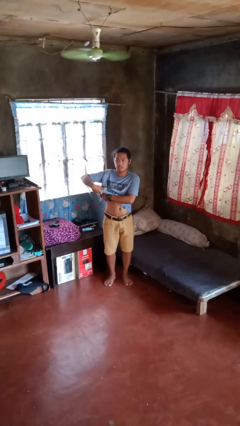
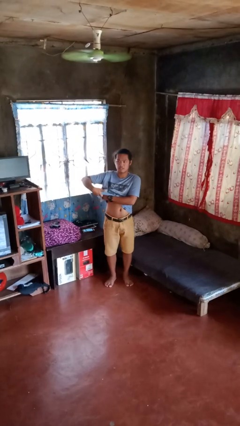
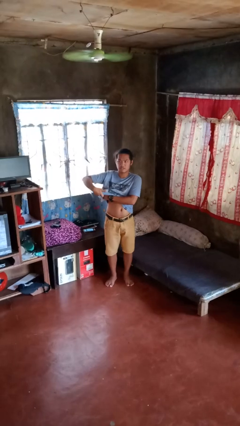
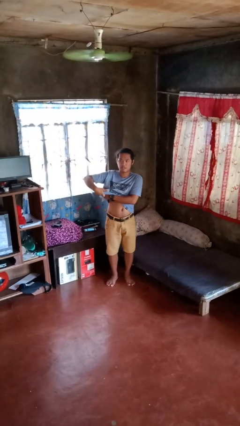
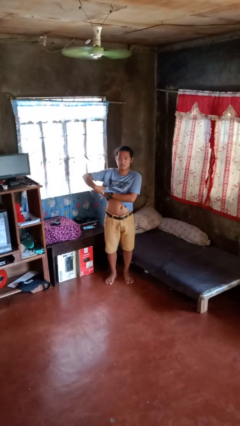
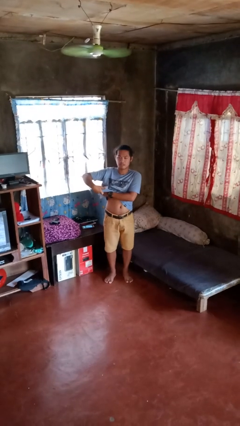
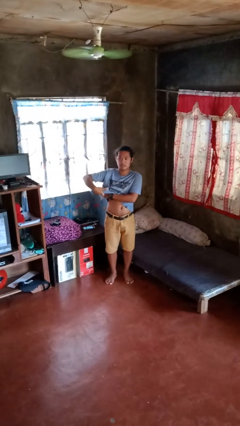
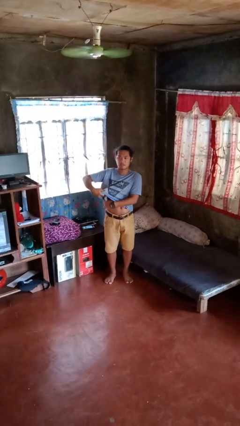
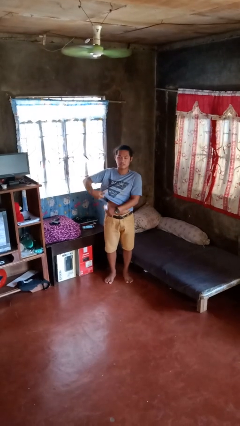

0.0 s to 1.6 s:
person applies deodorant

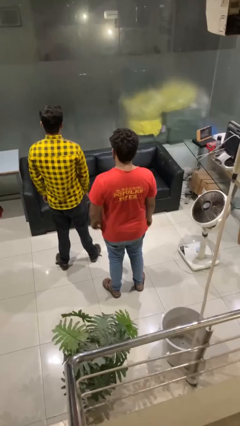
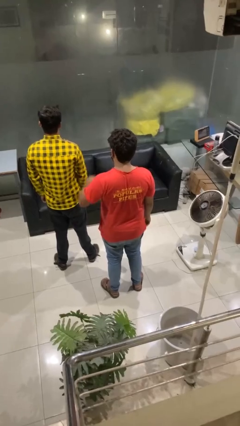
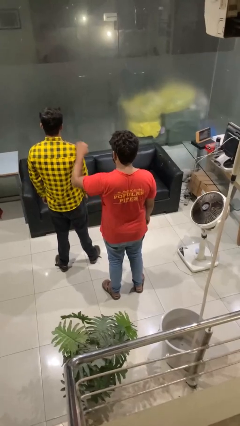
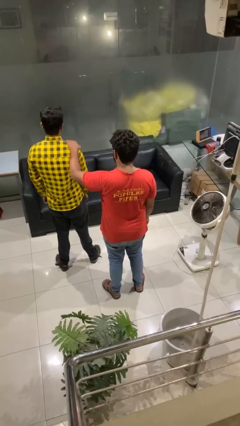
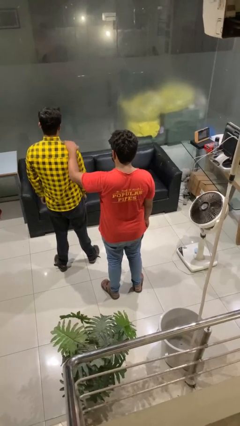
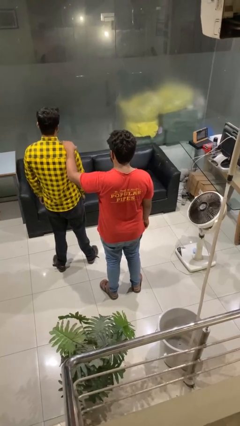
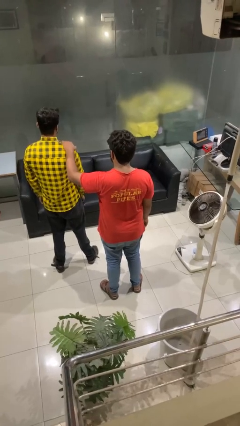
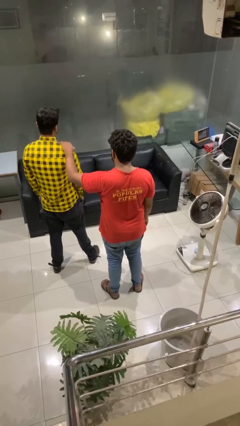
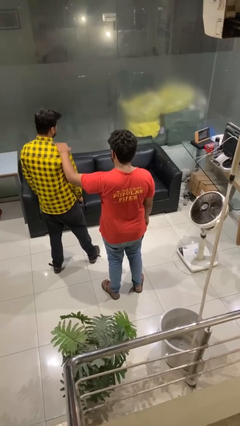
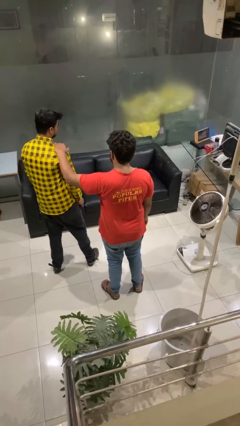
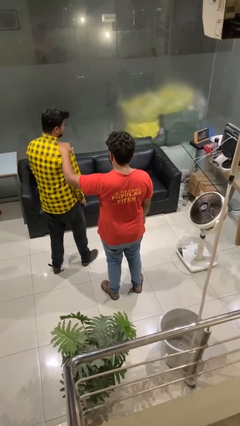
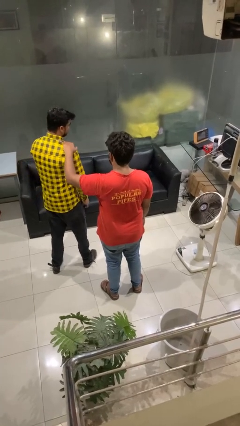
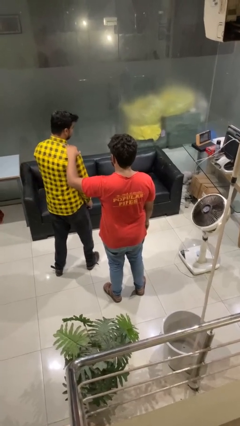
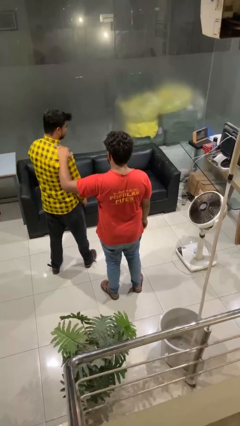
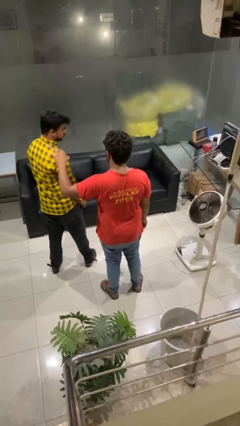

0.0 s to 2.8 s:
person grabs person by shoulder

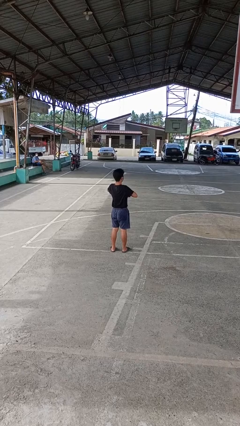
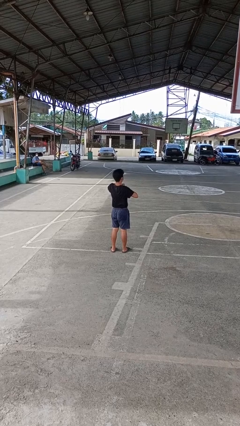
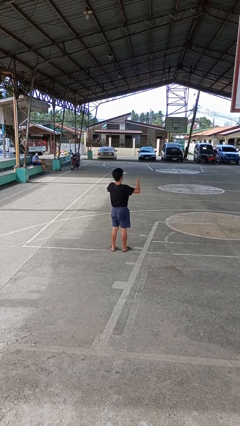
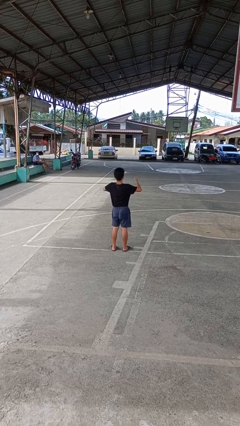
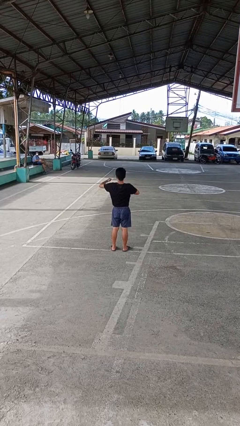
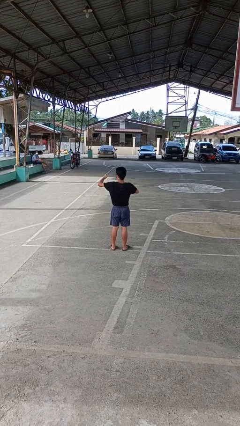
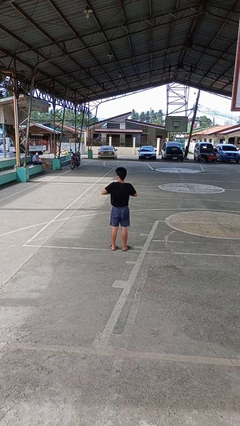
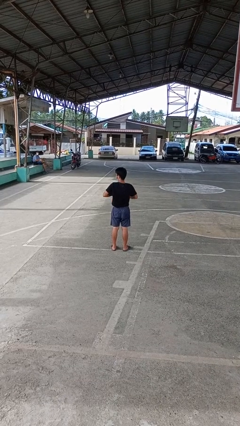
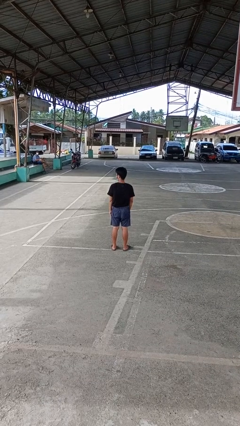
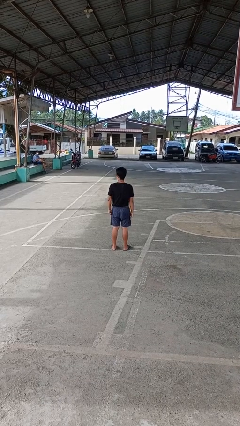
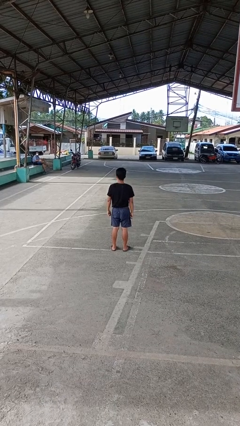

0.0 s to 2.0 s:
person drums on chest

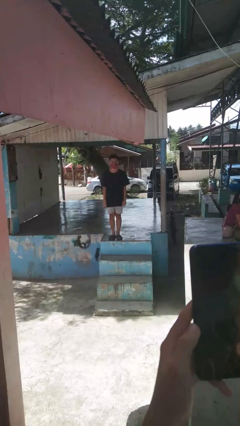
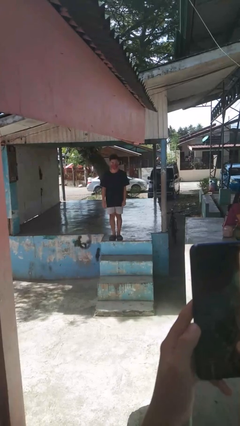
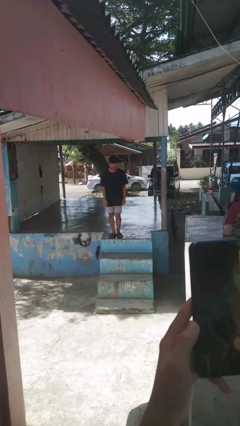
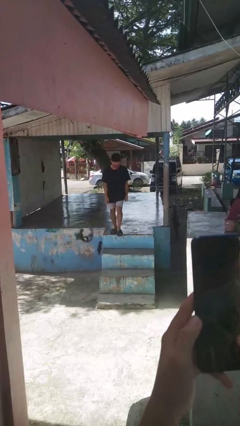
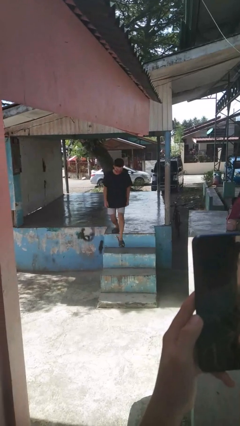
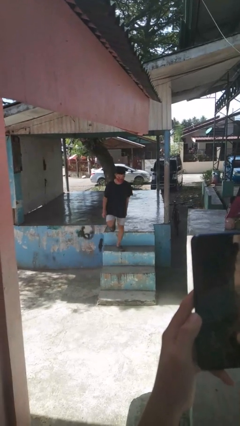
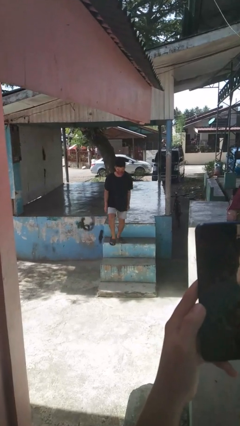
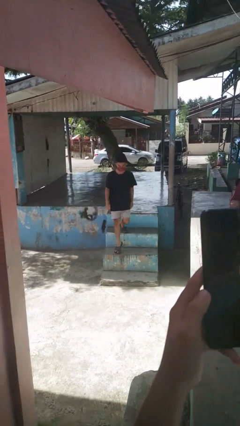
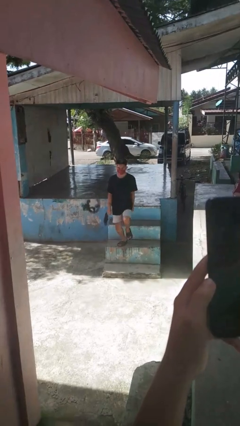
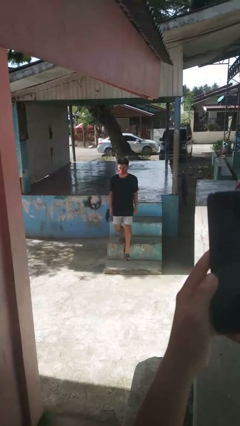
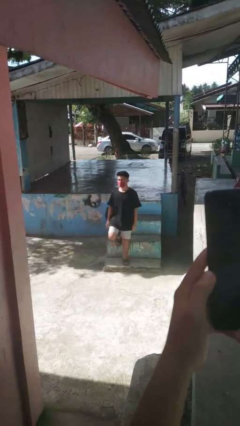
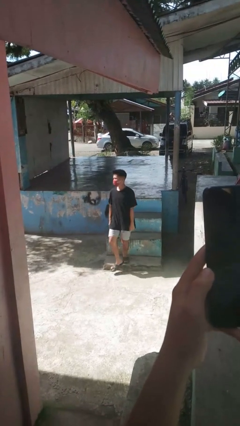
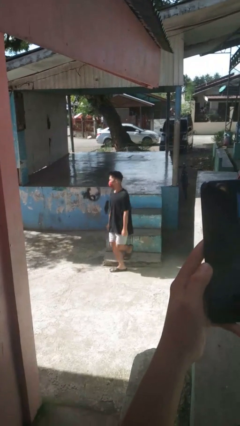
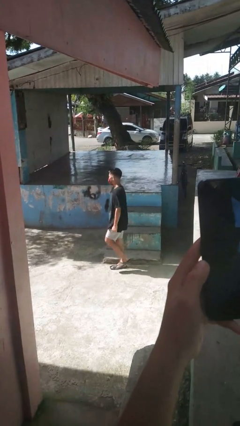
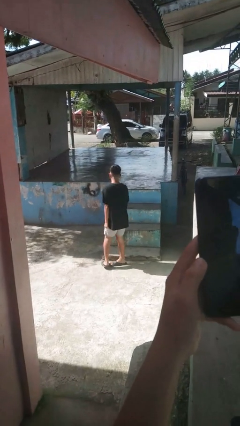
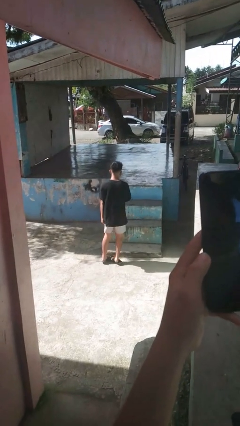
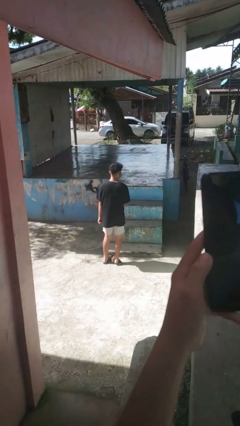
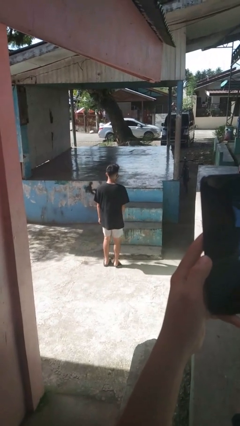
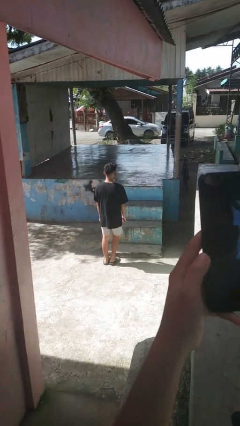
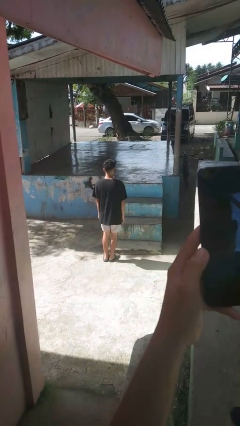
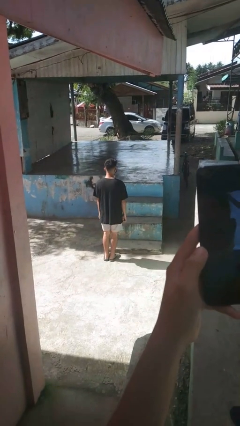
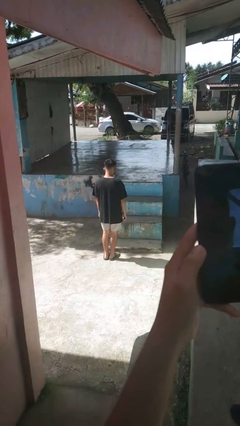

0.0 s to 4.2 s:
person climbs down stairs

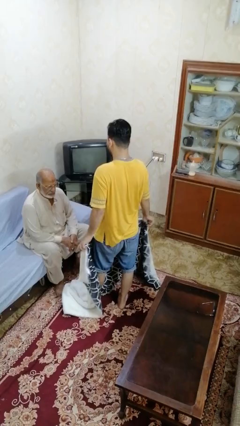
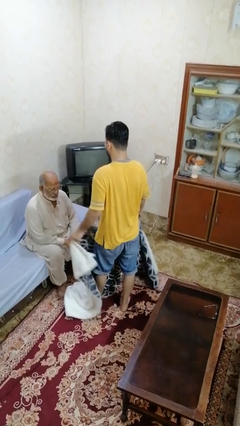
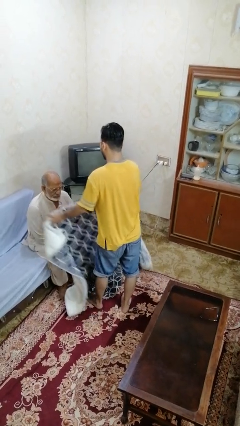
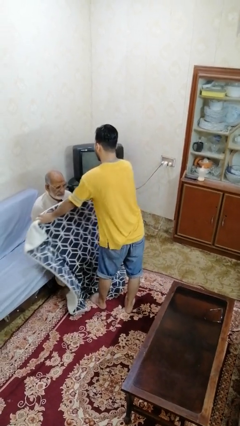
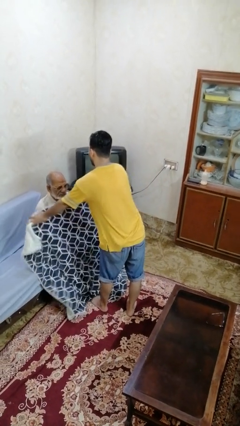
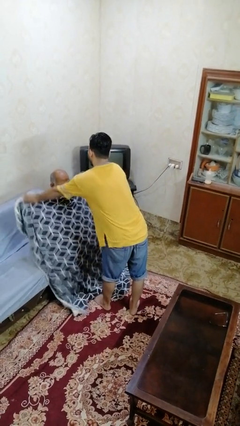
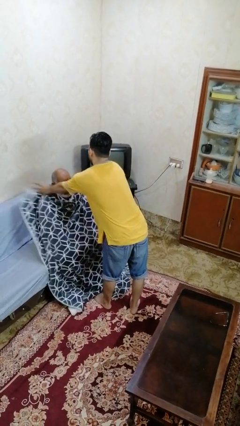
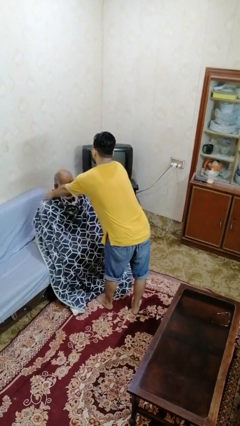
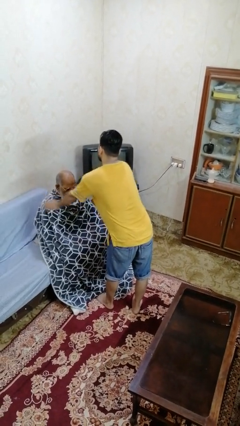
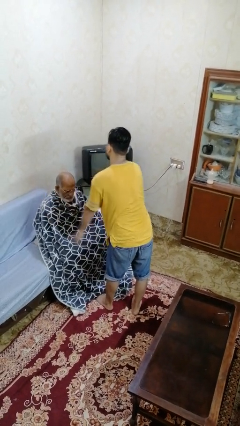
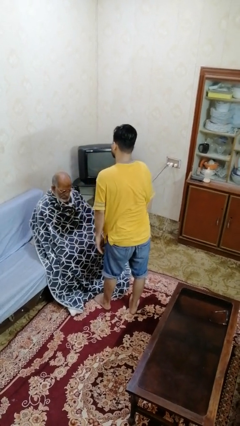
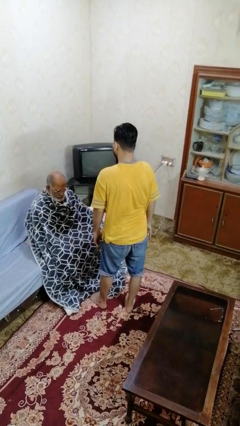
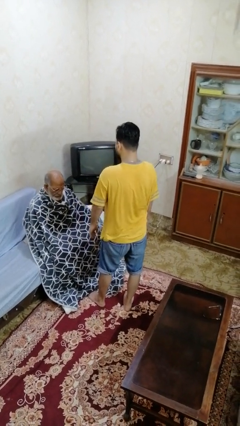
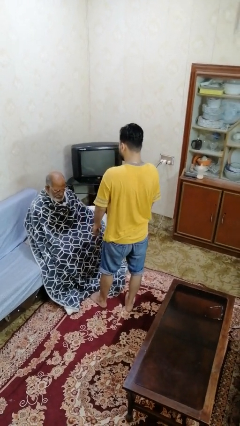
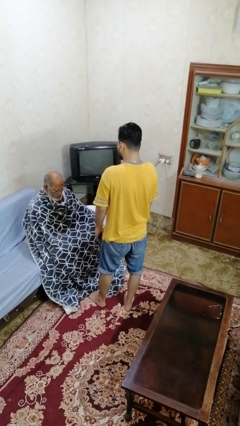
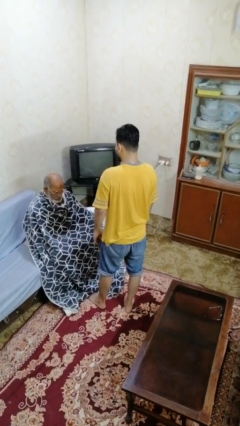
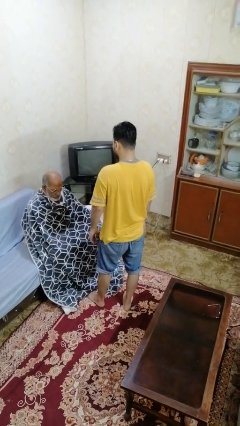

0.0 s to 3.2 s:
person covers friend with blanket

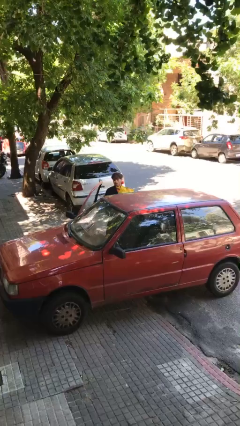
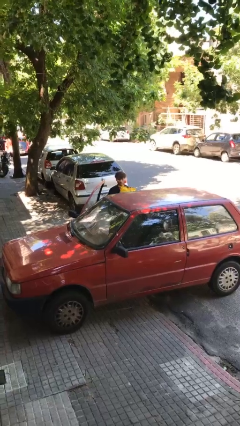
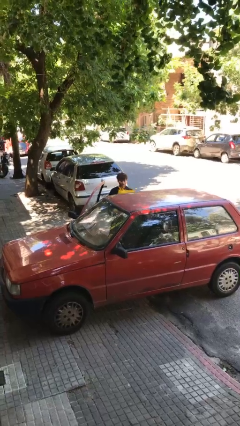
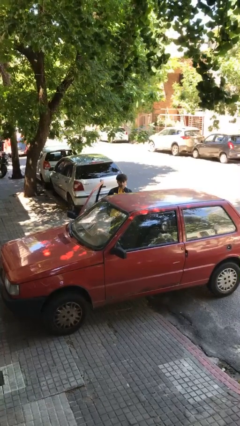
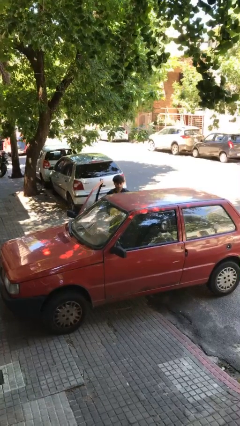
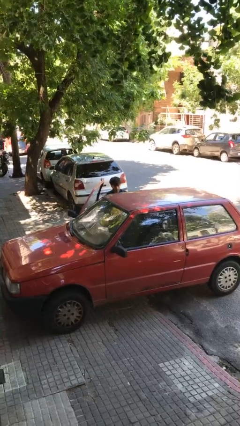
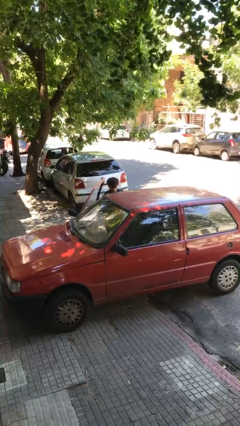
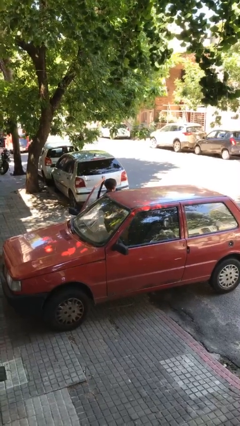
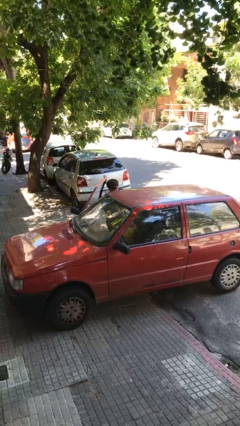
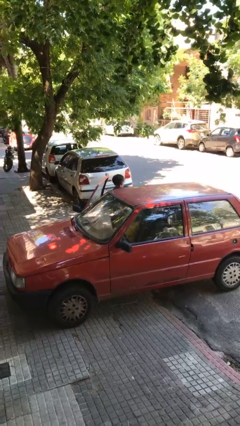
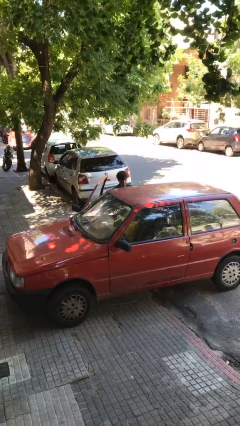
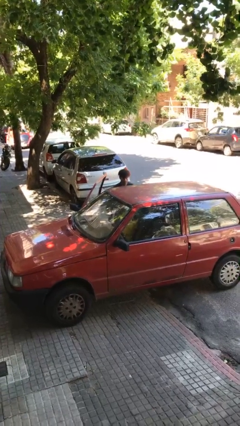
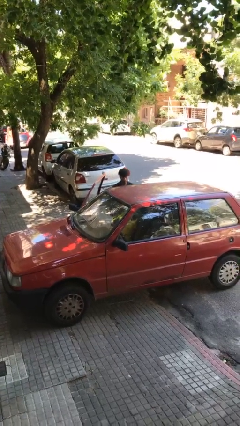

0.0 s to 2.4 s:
person loads car

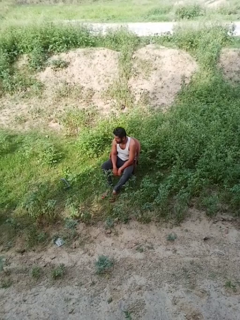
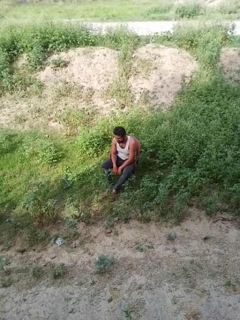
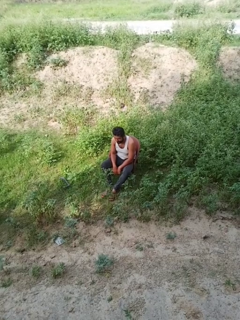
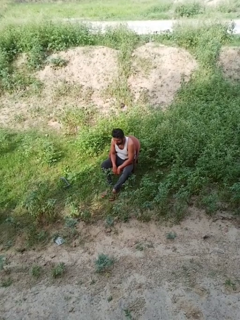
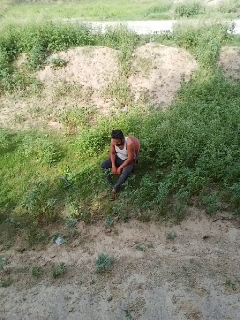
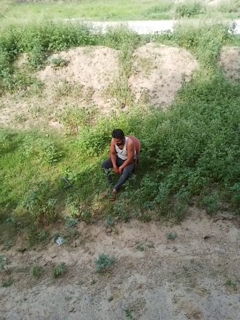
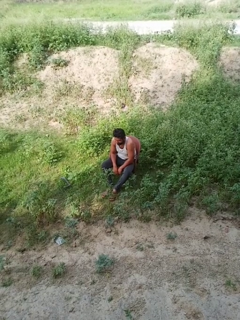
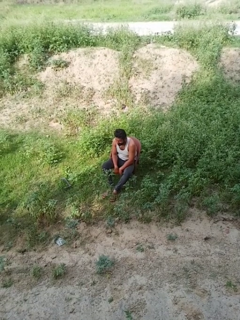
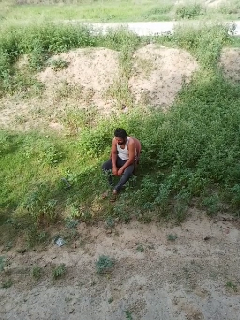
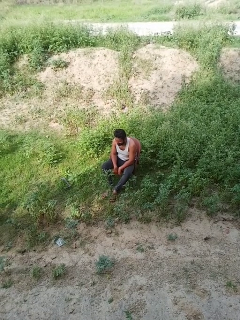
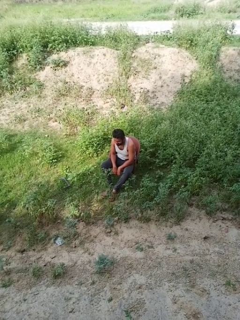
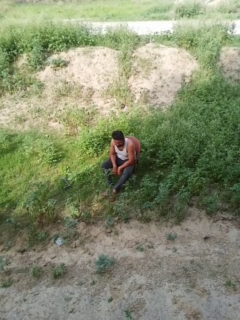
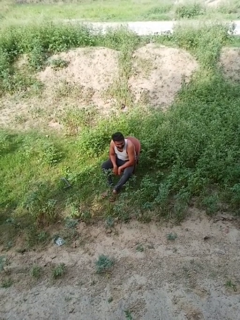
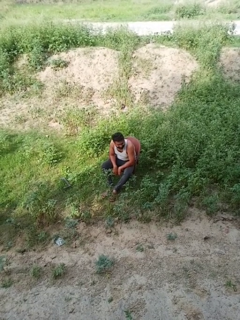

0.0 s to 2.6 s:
person shrugs
